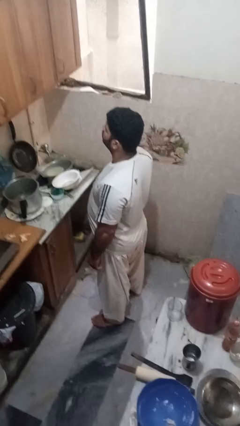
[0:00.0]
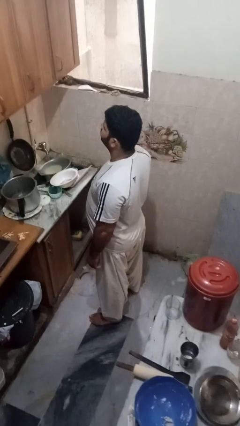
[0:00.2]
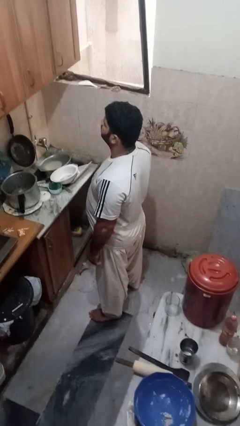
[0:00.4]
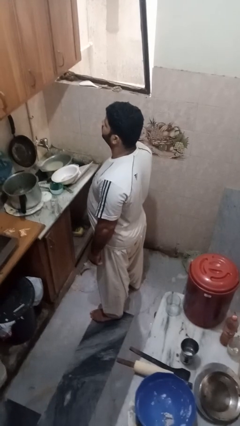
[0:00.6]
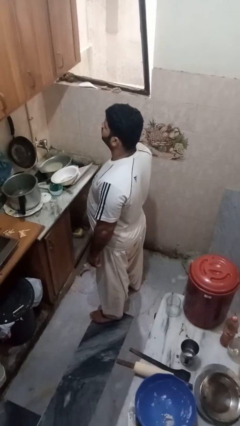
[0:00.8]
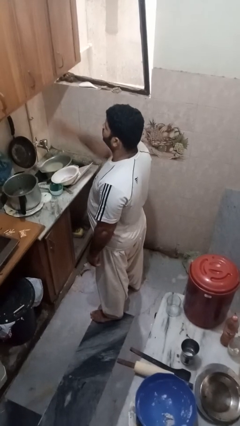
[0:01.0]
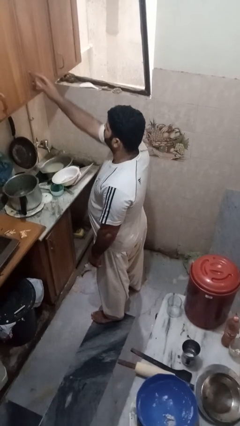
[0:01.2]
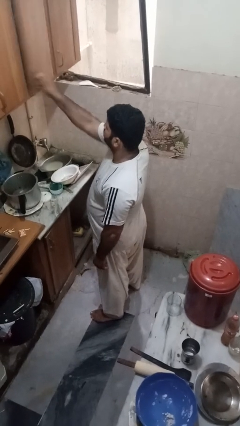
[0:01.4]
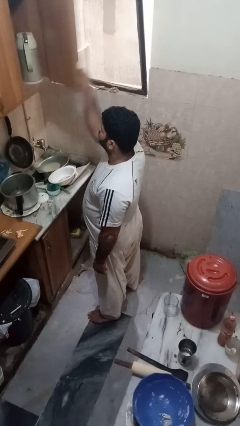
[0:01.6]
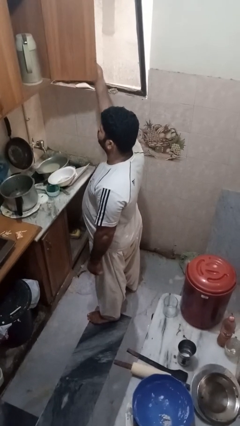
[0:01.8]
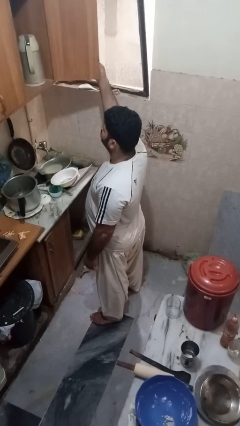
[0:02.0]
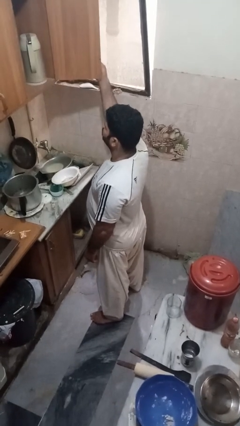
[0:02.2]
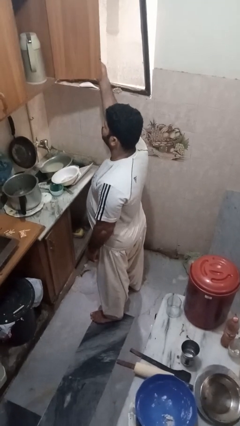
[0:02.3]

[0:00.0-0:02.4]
person opens cabinet

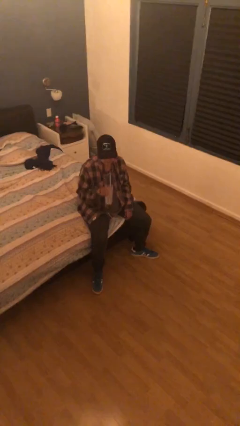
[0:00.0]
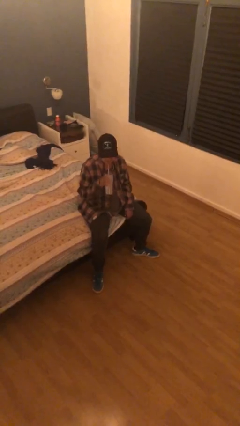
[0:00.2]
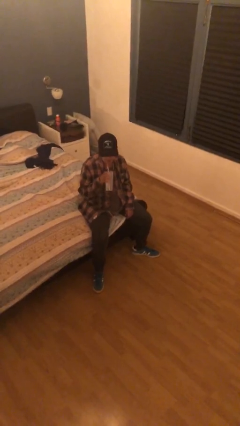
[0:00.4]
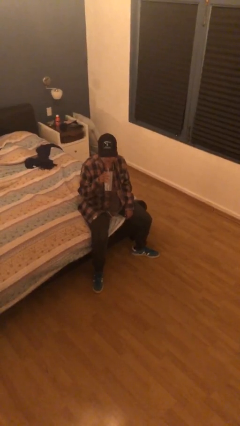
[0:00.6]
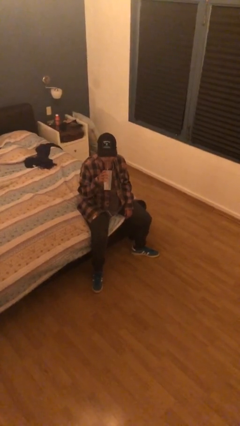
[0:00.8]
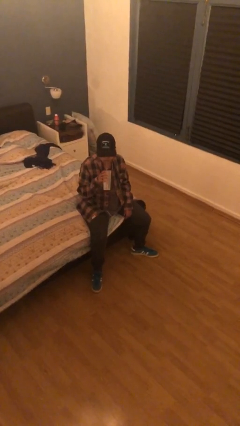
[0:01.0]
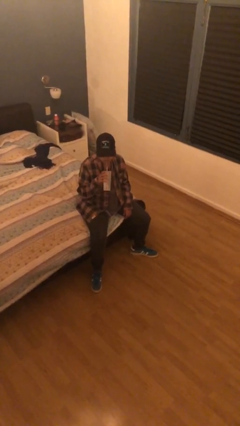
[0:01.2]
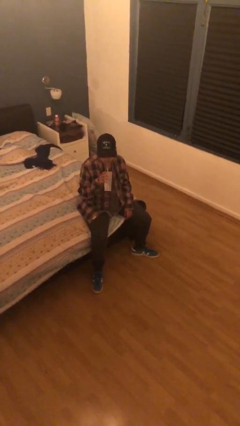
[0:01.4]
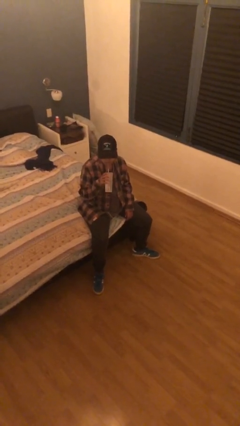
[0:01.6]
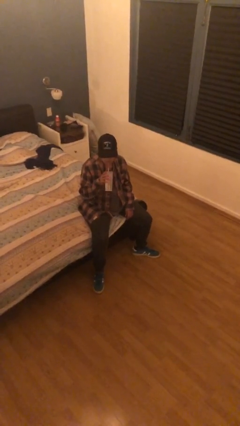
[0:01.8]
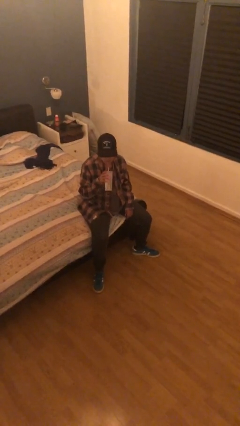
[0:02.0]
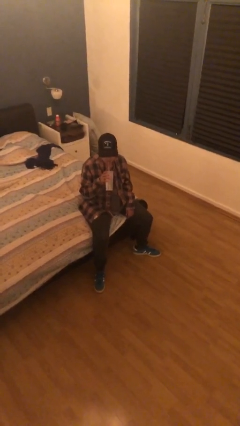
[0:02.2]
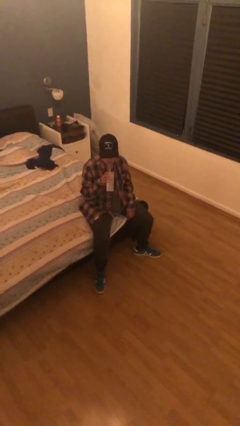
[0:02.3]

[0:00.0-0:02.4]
person drinks from straw

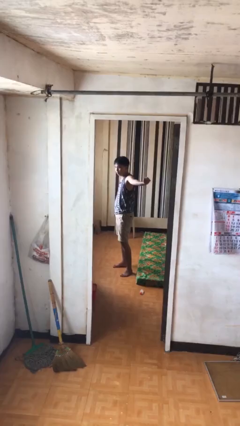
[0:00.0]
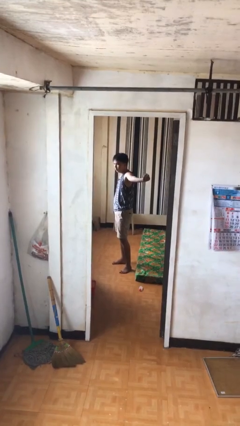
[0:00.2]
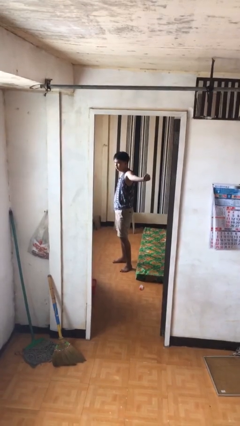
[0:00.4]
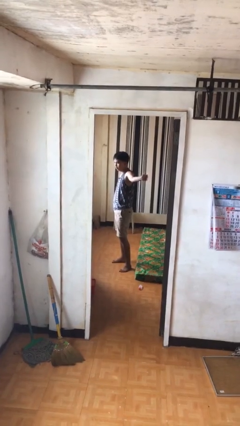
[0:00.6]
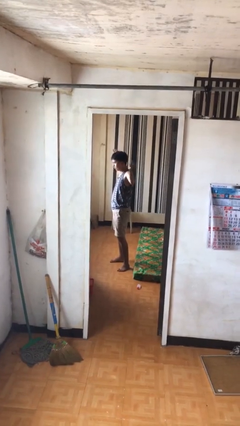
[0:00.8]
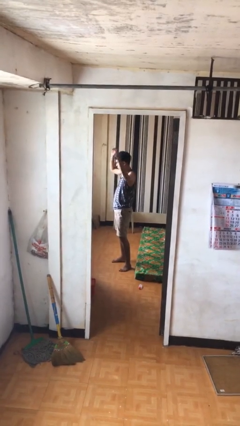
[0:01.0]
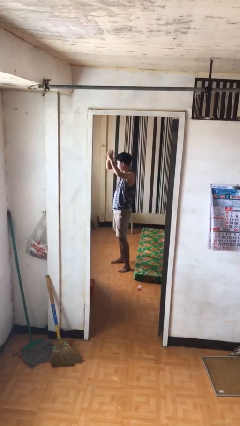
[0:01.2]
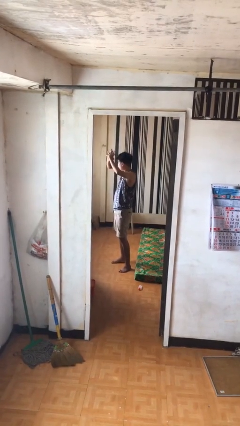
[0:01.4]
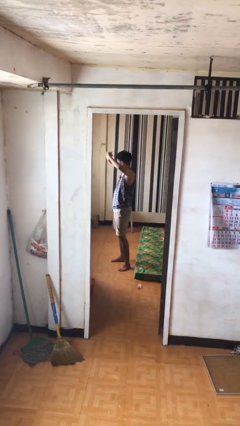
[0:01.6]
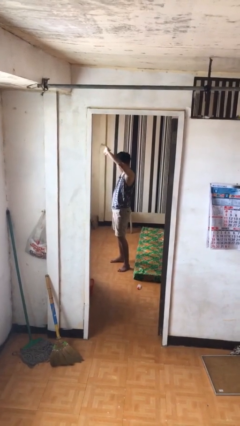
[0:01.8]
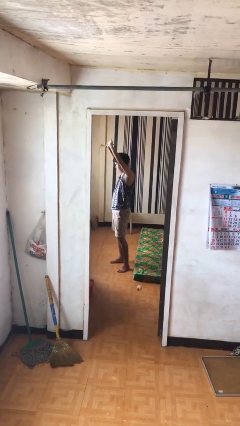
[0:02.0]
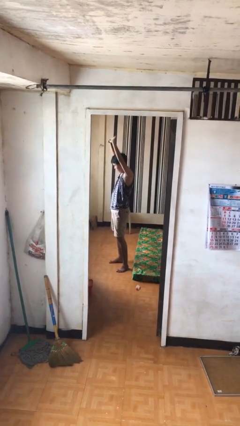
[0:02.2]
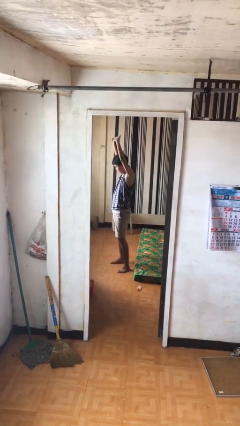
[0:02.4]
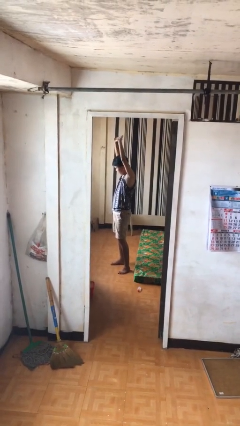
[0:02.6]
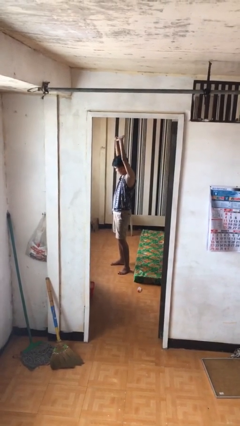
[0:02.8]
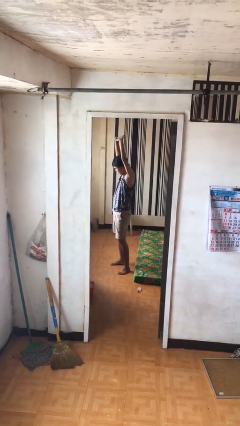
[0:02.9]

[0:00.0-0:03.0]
person stretches arms over head

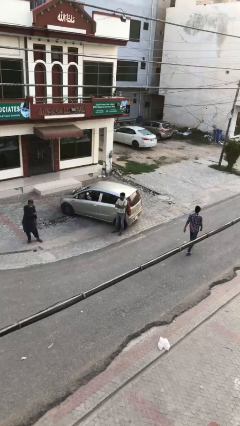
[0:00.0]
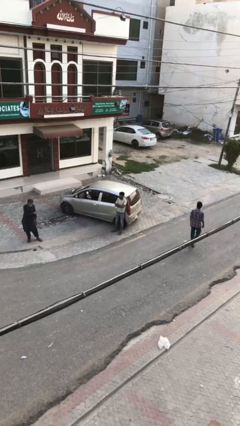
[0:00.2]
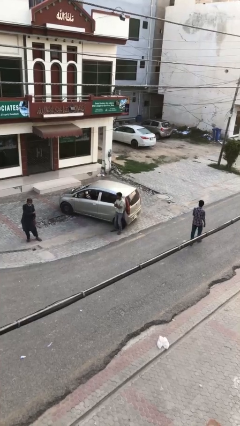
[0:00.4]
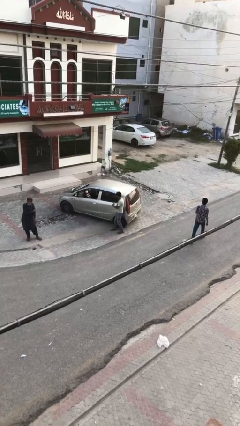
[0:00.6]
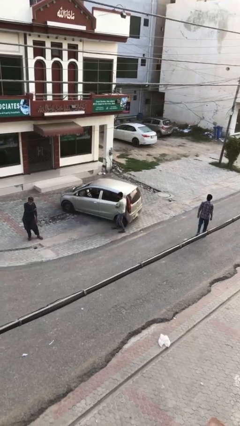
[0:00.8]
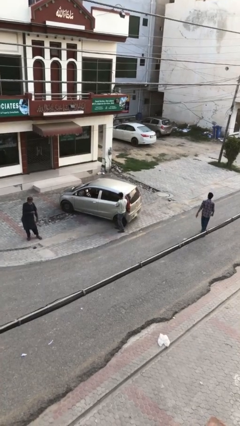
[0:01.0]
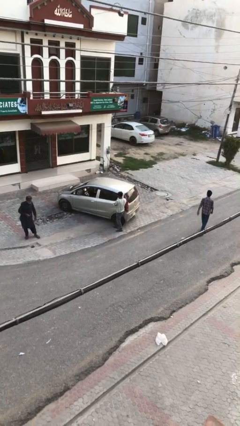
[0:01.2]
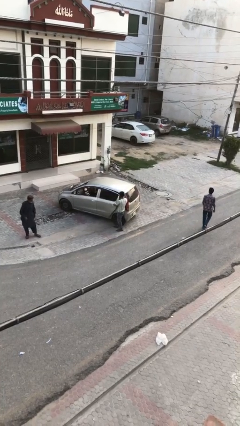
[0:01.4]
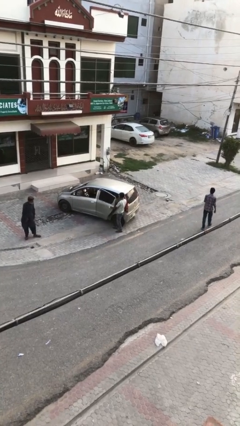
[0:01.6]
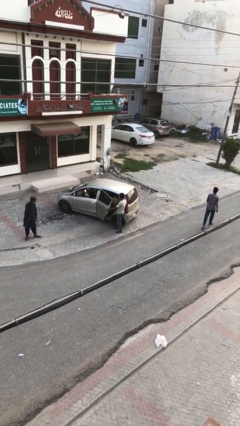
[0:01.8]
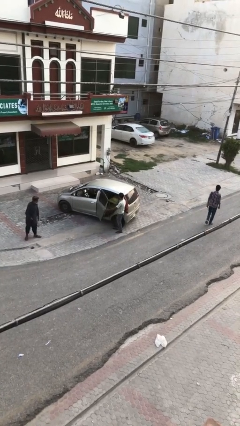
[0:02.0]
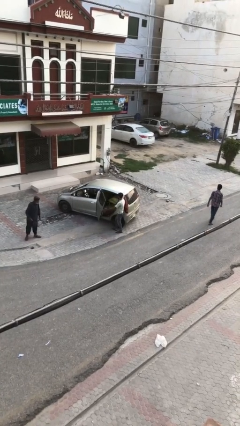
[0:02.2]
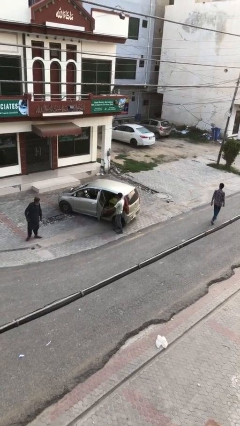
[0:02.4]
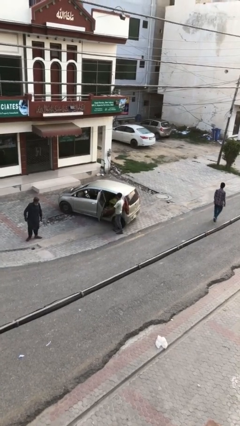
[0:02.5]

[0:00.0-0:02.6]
person opens car door

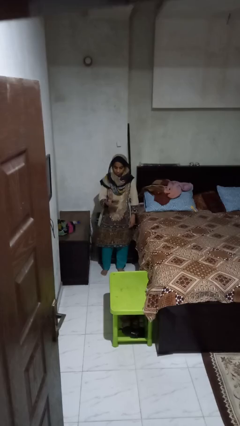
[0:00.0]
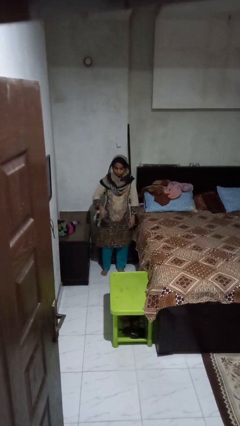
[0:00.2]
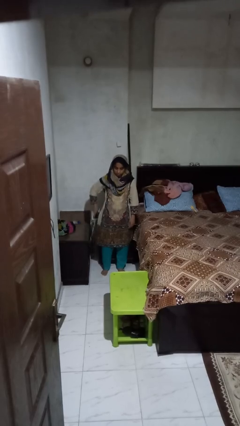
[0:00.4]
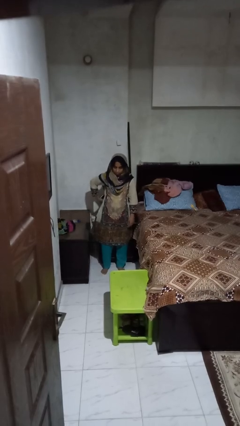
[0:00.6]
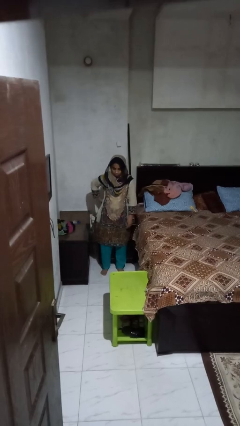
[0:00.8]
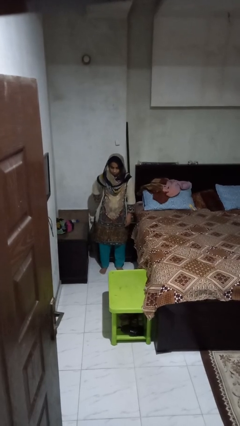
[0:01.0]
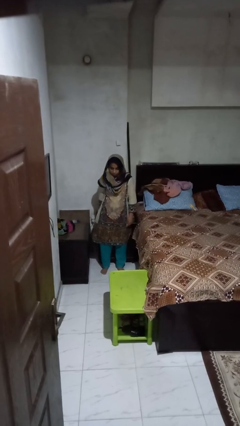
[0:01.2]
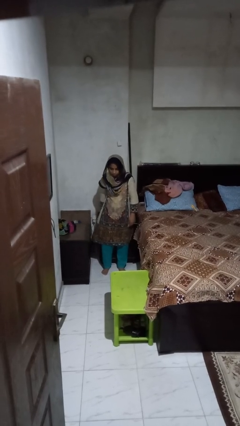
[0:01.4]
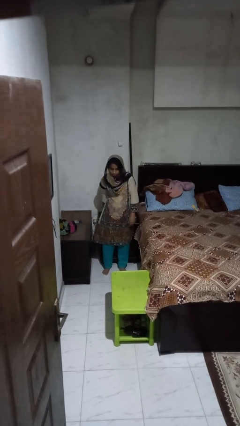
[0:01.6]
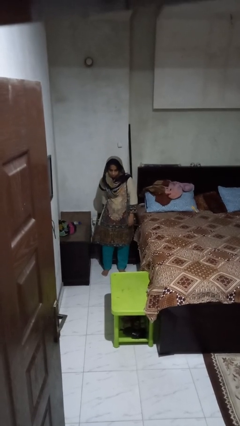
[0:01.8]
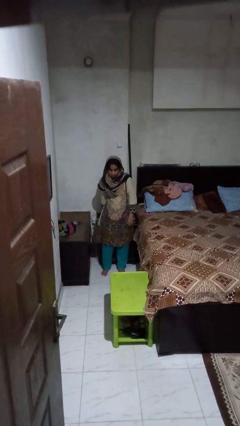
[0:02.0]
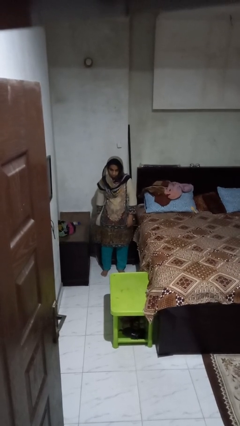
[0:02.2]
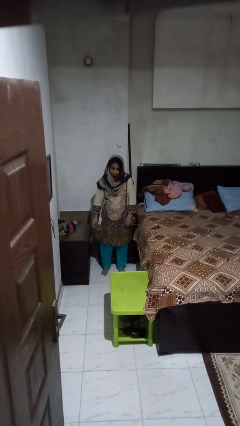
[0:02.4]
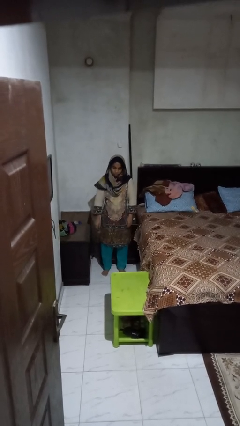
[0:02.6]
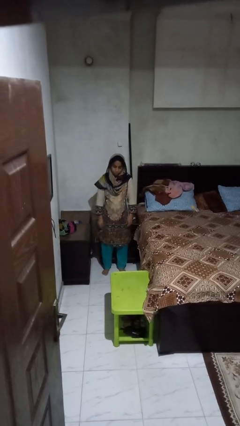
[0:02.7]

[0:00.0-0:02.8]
person puts phone into pocket

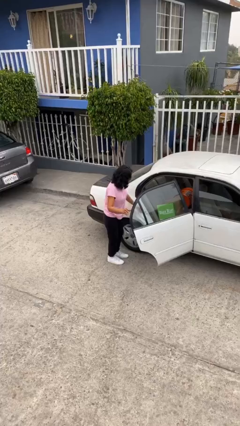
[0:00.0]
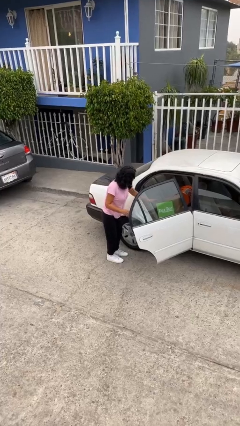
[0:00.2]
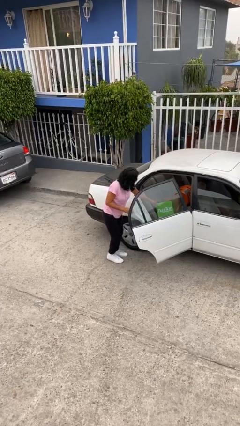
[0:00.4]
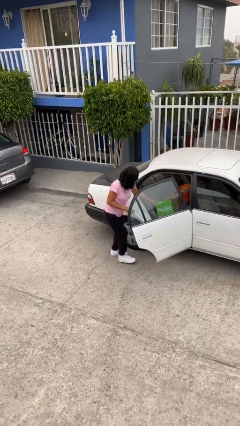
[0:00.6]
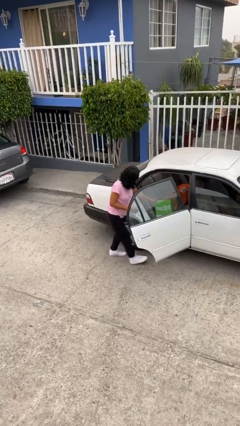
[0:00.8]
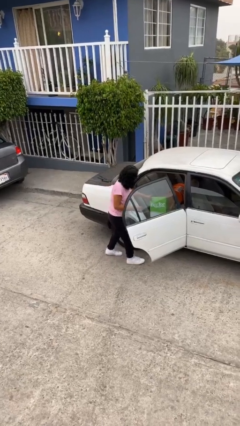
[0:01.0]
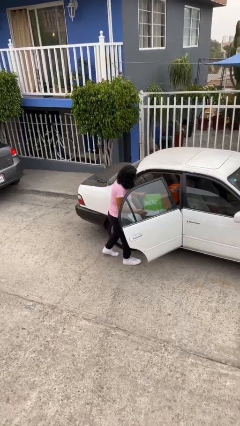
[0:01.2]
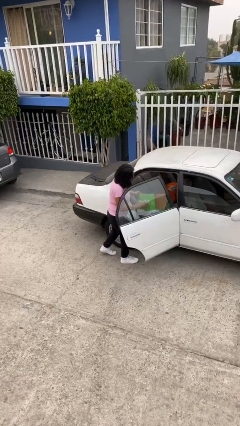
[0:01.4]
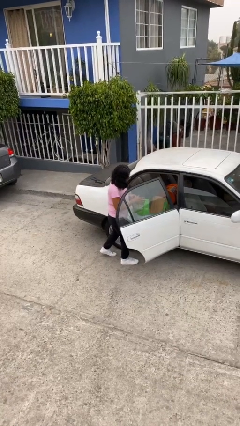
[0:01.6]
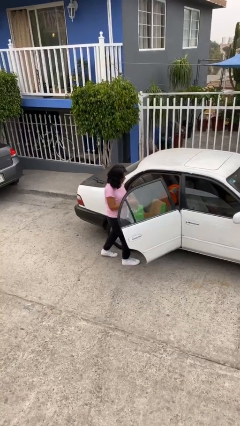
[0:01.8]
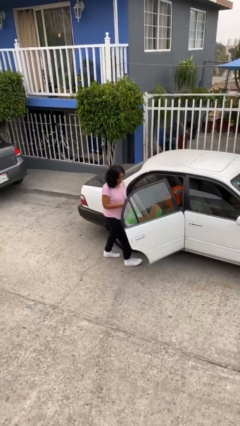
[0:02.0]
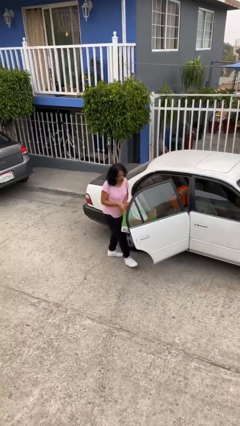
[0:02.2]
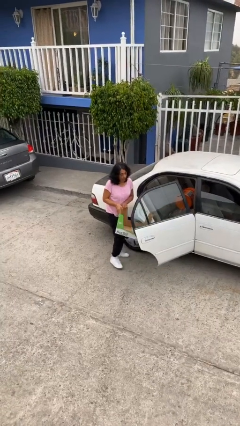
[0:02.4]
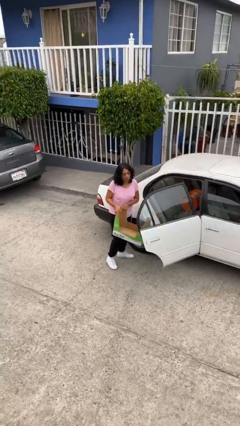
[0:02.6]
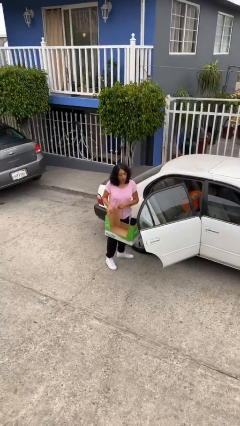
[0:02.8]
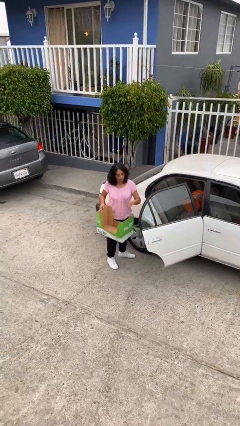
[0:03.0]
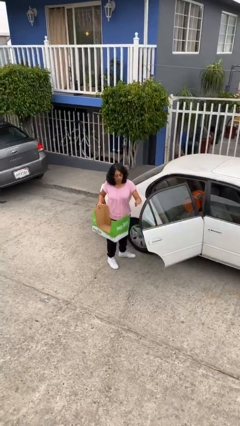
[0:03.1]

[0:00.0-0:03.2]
person unloads car

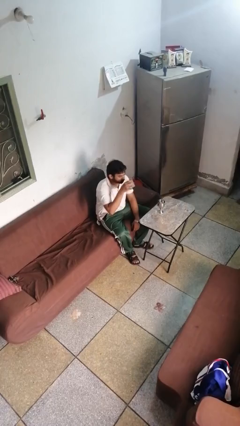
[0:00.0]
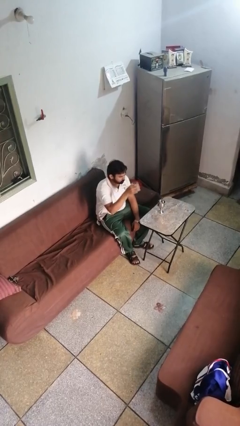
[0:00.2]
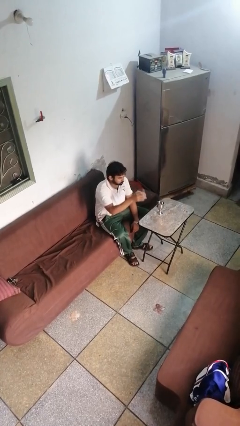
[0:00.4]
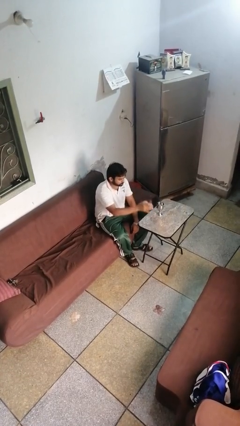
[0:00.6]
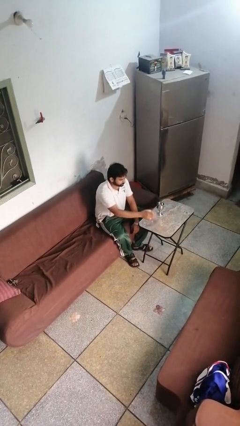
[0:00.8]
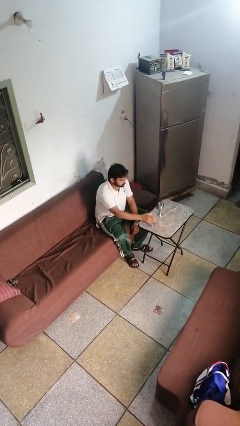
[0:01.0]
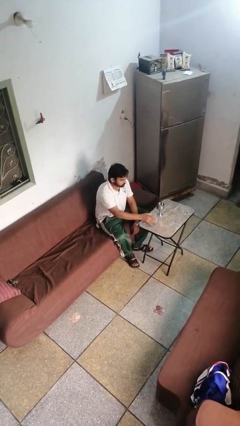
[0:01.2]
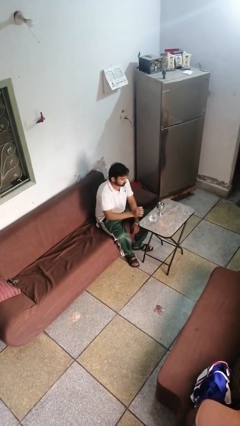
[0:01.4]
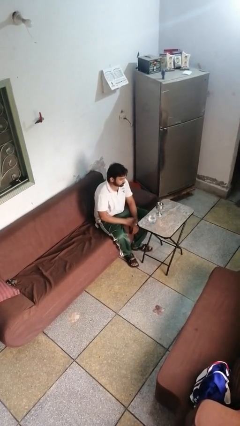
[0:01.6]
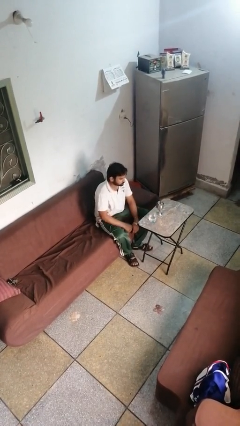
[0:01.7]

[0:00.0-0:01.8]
person puts down object on table
